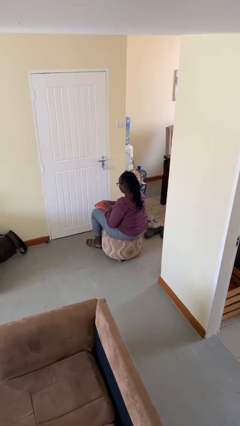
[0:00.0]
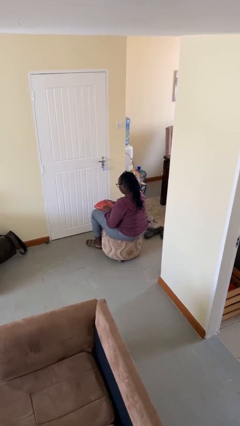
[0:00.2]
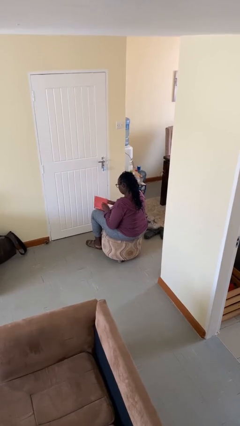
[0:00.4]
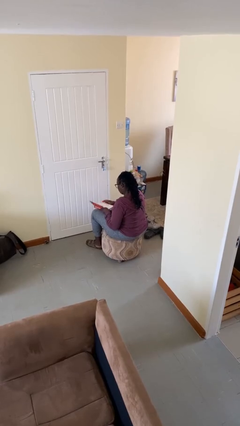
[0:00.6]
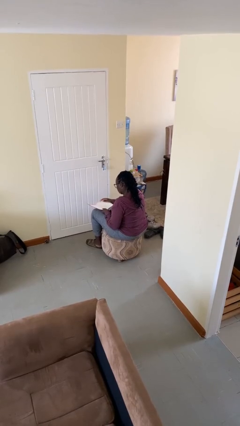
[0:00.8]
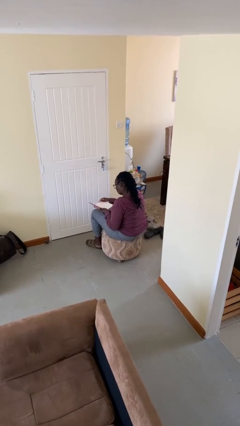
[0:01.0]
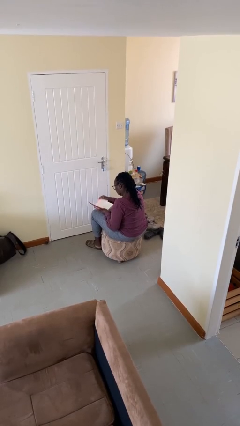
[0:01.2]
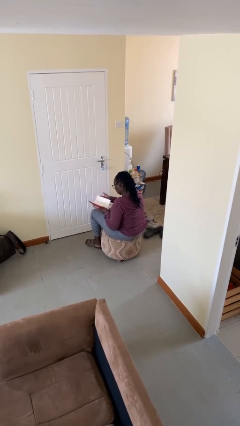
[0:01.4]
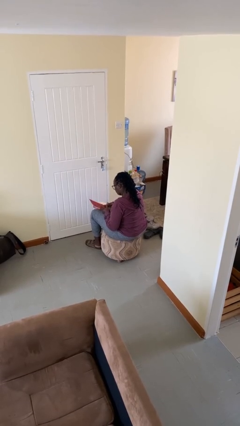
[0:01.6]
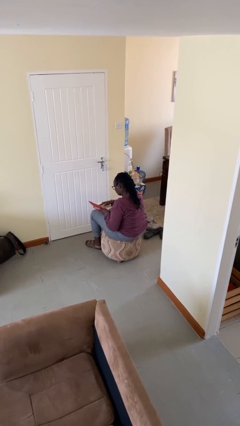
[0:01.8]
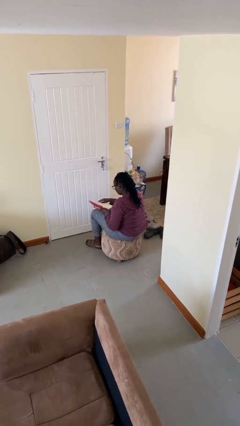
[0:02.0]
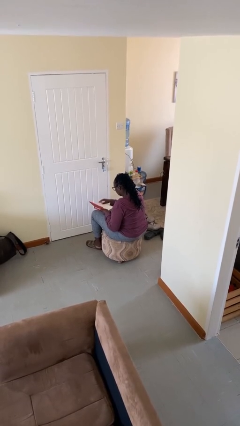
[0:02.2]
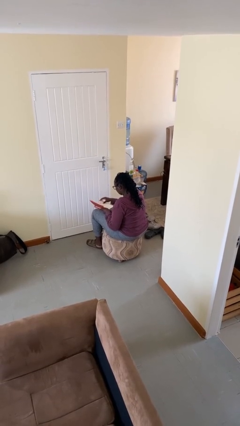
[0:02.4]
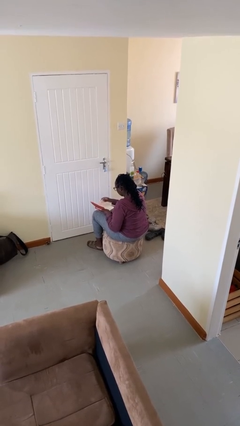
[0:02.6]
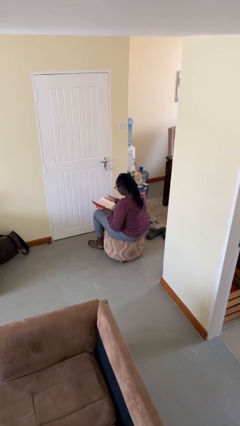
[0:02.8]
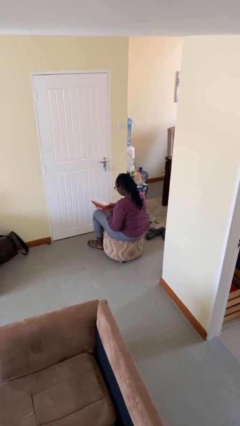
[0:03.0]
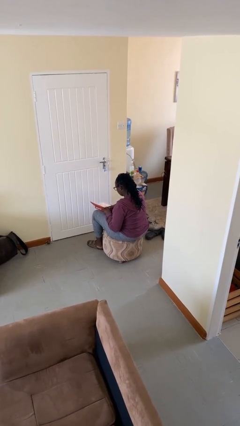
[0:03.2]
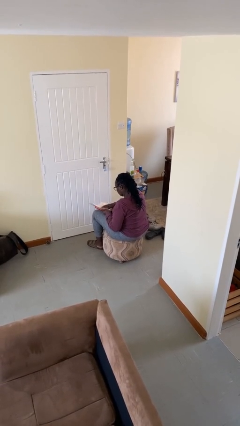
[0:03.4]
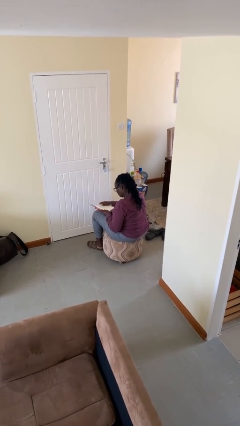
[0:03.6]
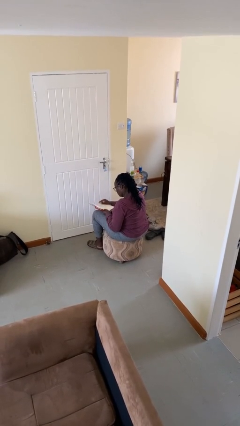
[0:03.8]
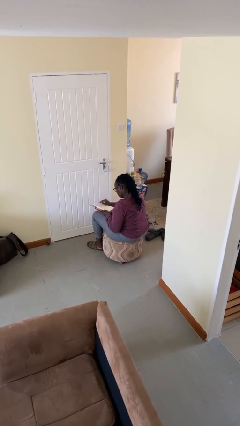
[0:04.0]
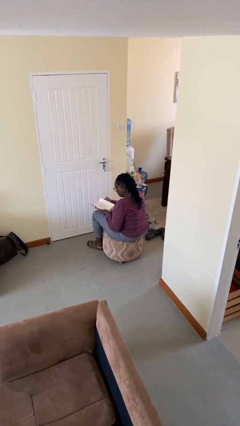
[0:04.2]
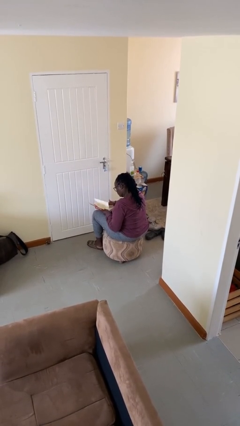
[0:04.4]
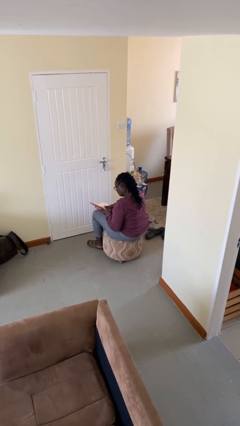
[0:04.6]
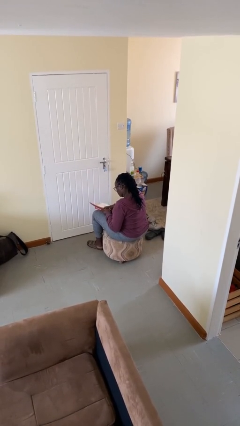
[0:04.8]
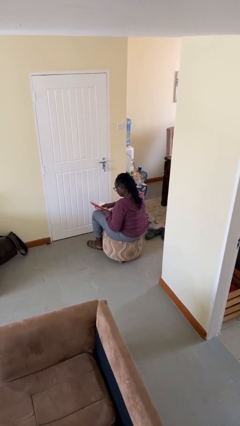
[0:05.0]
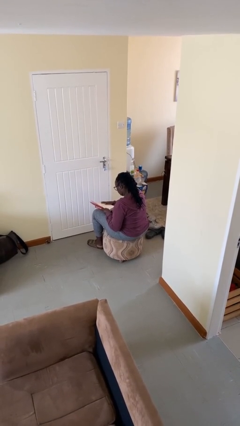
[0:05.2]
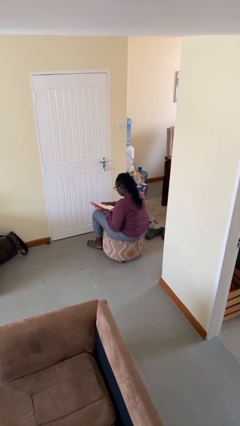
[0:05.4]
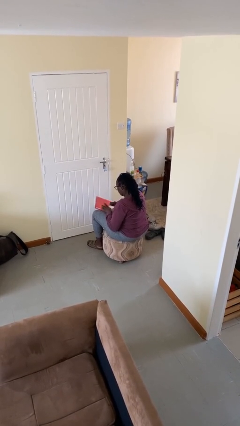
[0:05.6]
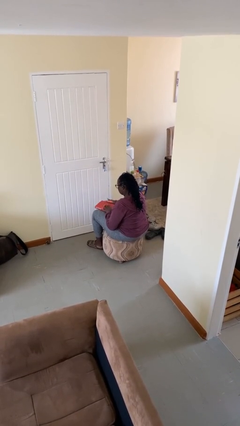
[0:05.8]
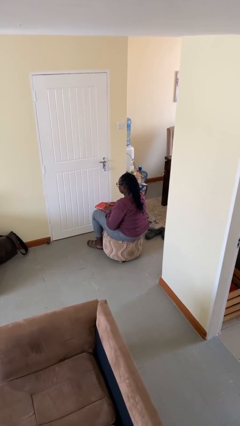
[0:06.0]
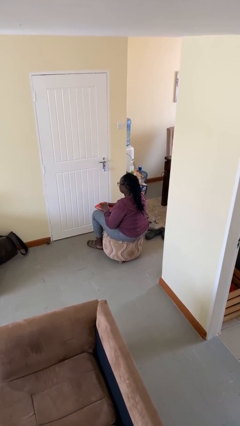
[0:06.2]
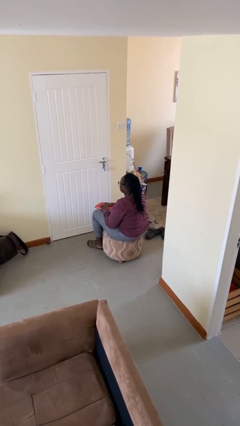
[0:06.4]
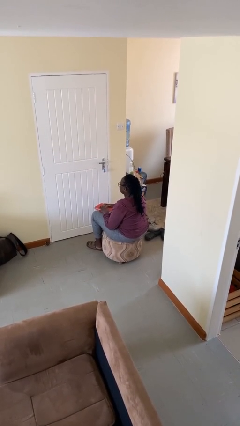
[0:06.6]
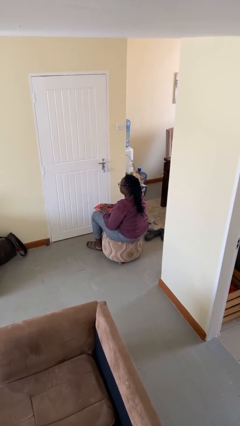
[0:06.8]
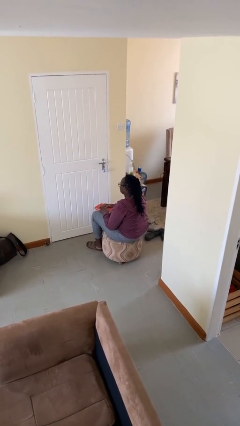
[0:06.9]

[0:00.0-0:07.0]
person reads book

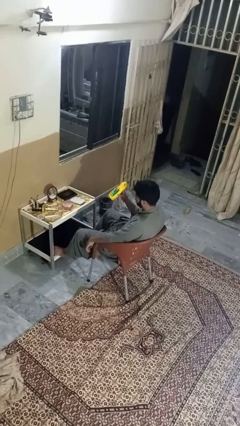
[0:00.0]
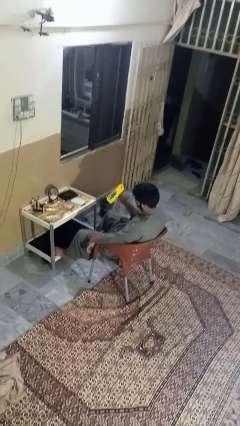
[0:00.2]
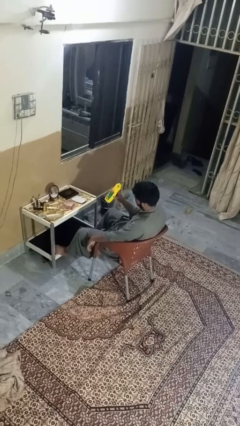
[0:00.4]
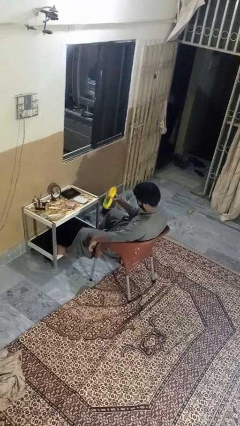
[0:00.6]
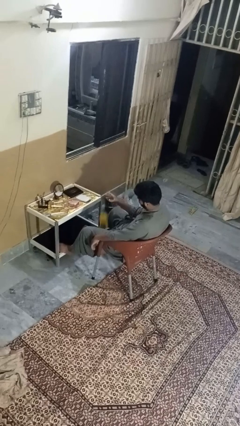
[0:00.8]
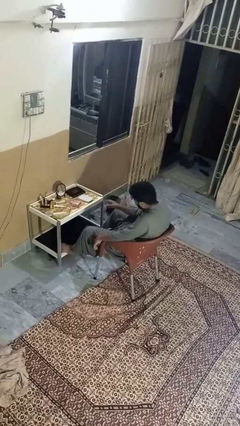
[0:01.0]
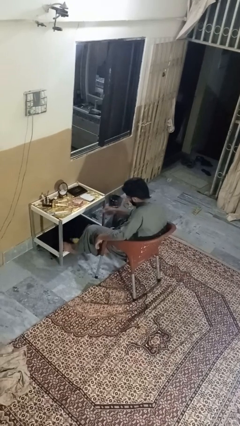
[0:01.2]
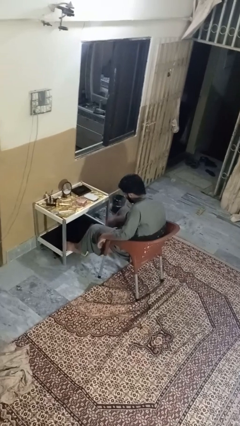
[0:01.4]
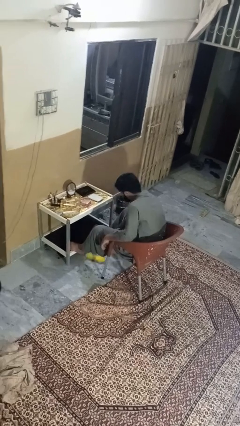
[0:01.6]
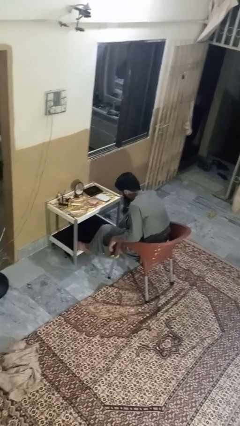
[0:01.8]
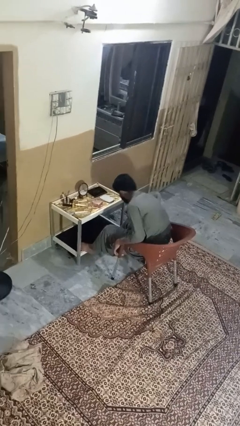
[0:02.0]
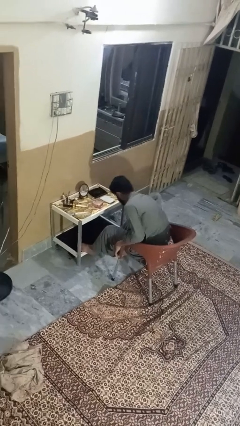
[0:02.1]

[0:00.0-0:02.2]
person throws object to ground

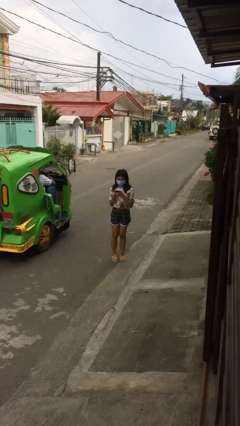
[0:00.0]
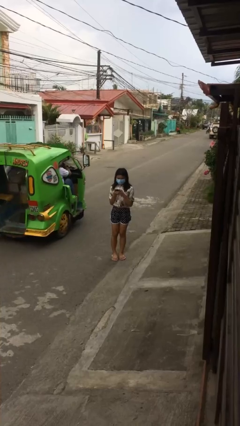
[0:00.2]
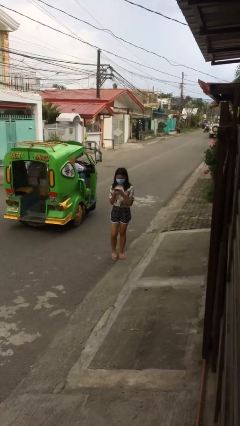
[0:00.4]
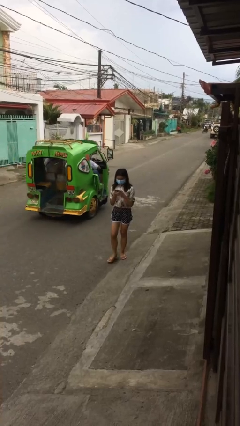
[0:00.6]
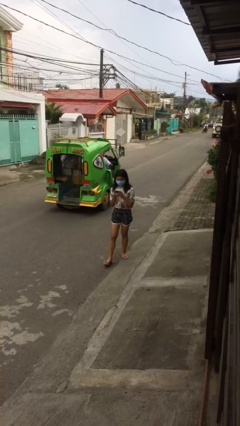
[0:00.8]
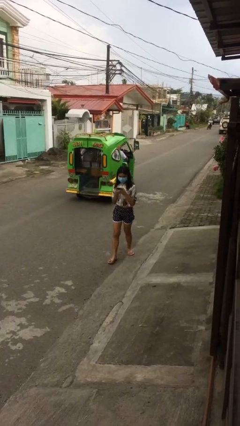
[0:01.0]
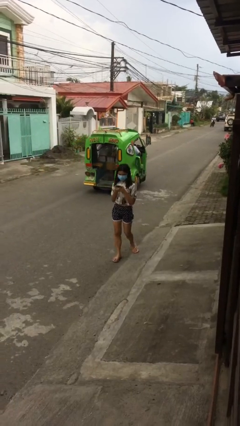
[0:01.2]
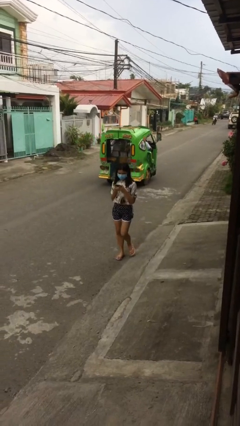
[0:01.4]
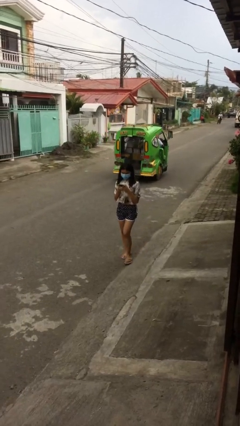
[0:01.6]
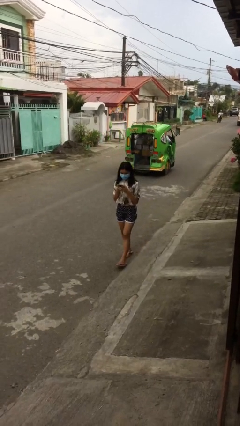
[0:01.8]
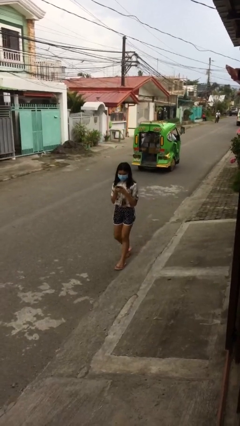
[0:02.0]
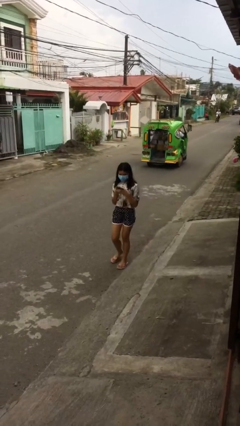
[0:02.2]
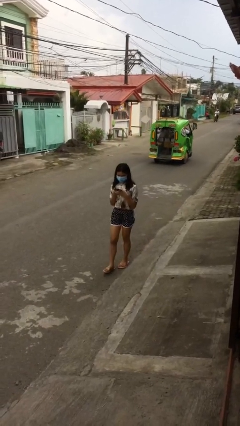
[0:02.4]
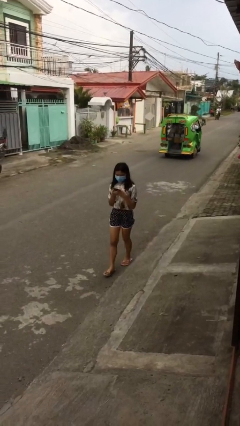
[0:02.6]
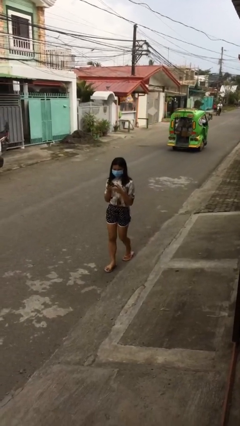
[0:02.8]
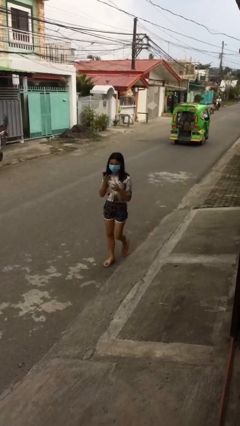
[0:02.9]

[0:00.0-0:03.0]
person texts on phone

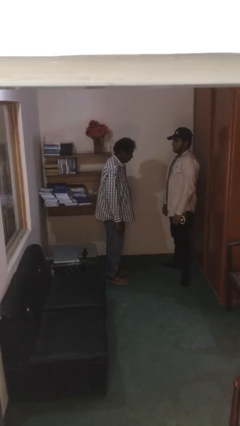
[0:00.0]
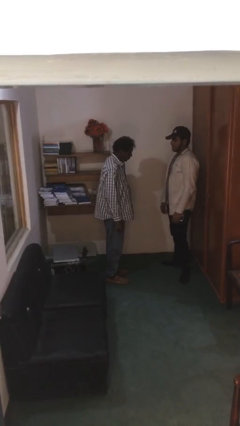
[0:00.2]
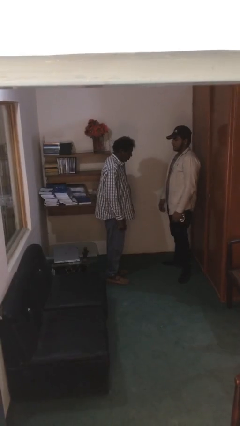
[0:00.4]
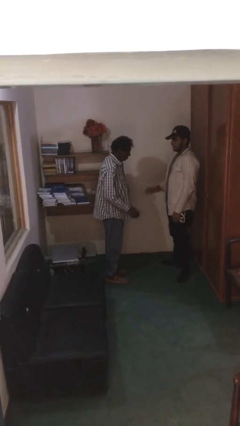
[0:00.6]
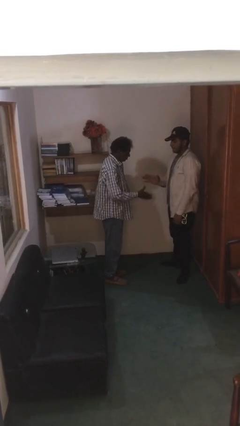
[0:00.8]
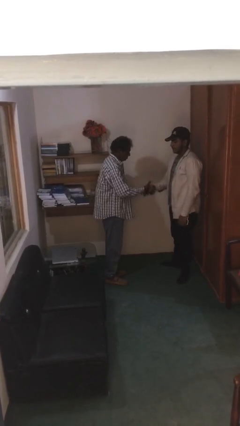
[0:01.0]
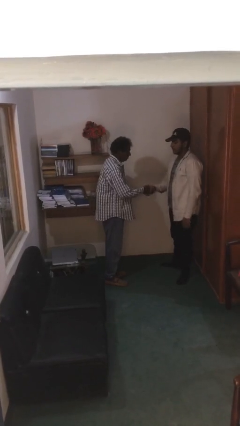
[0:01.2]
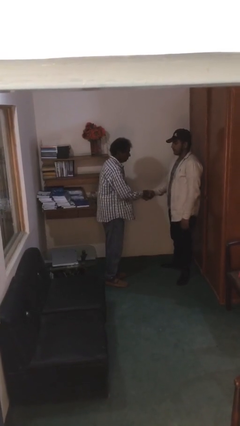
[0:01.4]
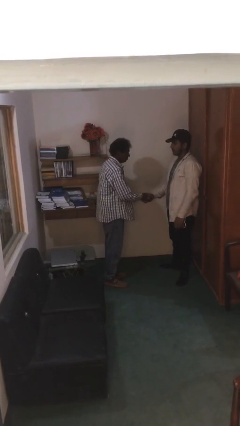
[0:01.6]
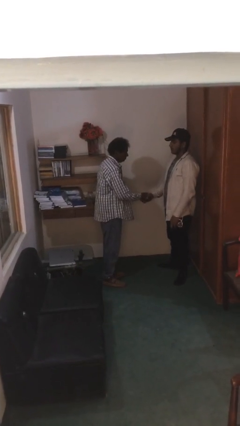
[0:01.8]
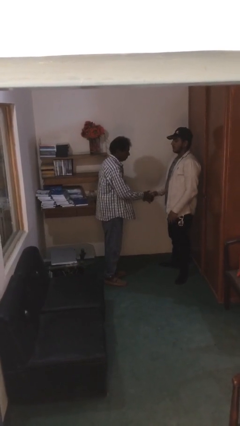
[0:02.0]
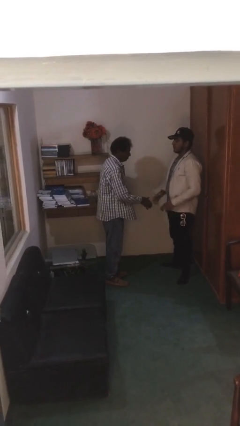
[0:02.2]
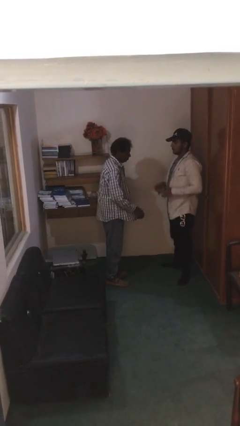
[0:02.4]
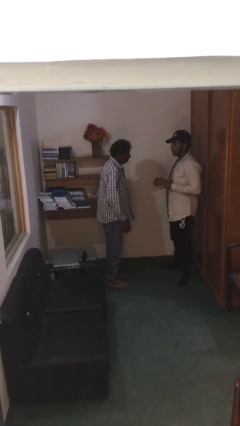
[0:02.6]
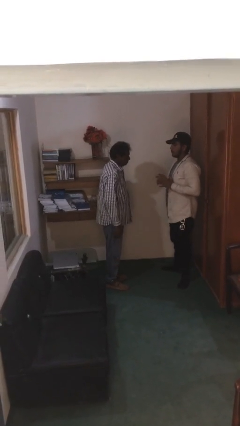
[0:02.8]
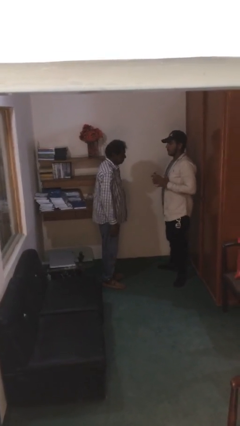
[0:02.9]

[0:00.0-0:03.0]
person shakes hand

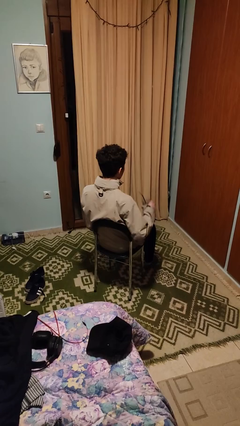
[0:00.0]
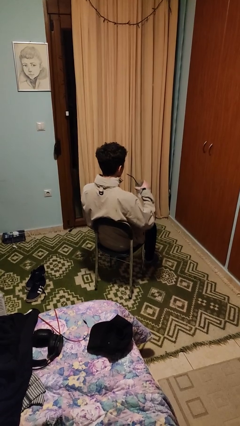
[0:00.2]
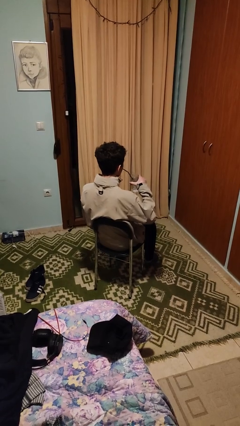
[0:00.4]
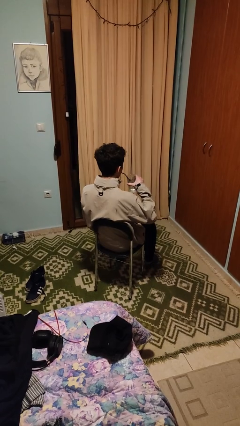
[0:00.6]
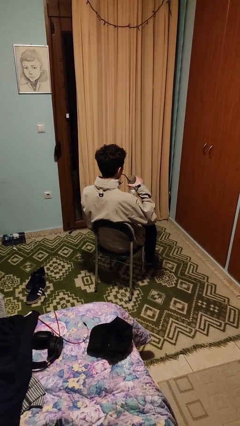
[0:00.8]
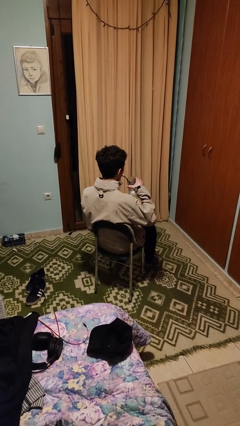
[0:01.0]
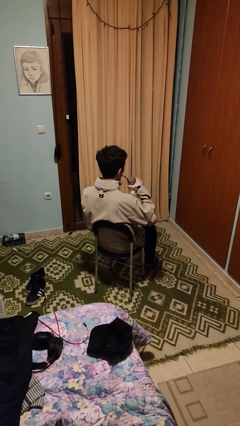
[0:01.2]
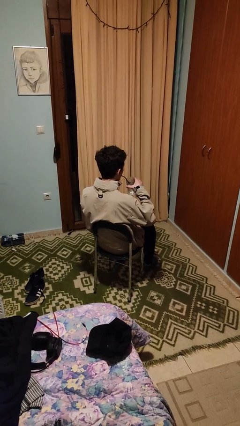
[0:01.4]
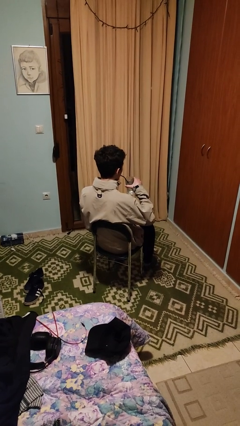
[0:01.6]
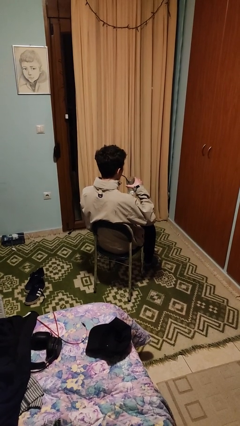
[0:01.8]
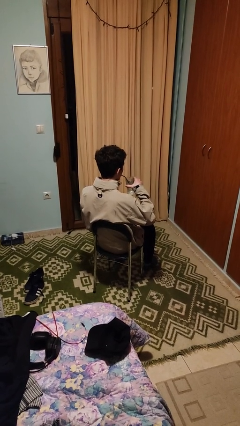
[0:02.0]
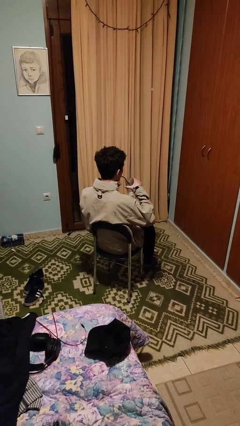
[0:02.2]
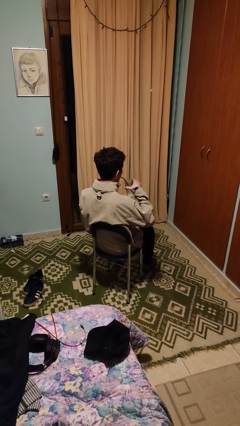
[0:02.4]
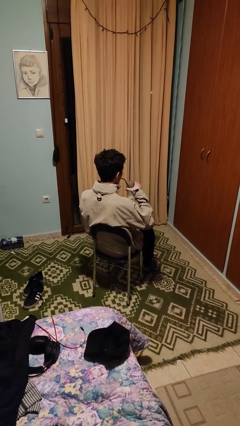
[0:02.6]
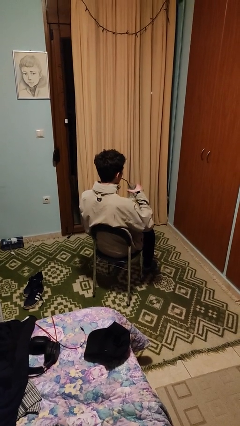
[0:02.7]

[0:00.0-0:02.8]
person drinks from straw
